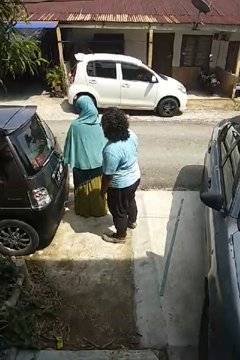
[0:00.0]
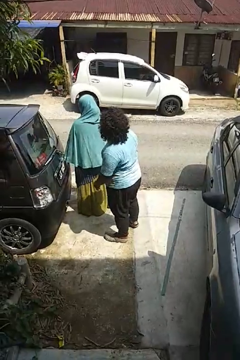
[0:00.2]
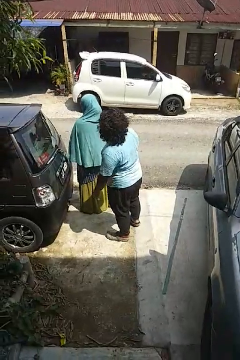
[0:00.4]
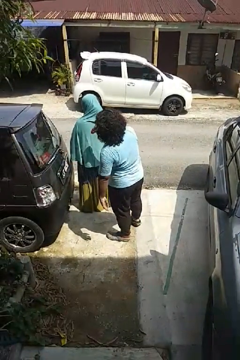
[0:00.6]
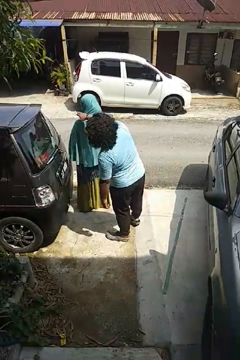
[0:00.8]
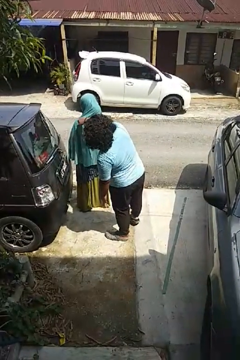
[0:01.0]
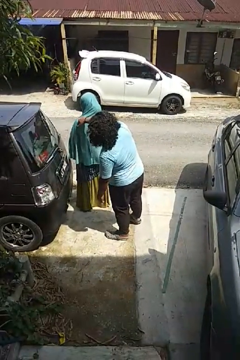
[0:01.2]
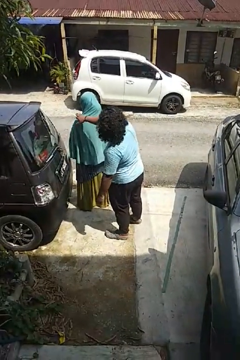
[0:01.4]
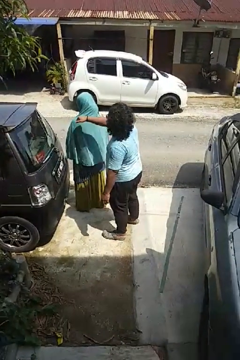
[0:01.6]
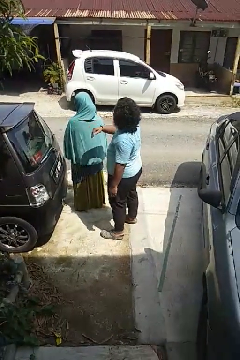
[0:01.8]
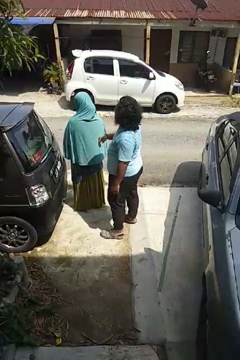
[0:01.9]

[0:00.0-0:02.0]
person touches back of person

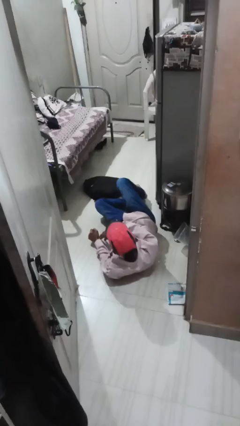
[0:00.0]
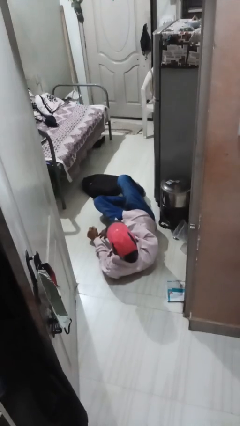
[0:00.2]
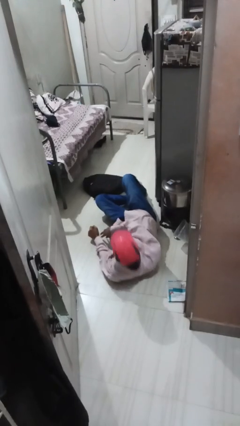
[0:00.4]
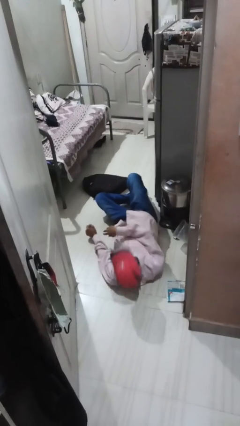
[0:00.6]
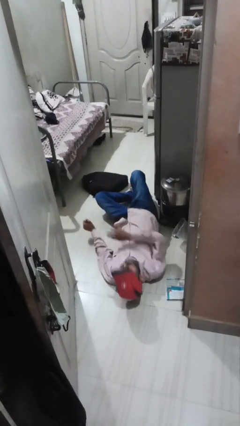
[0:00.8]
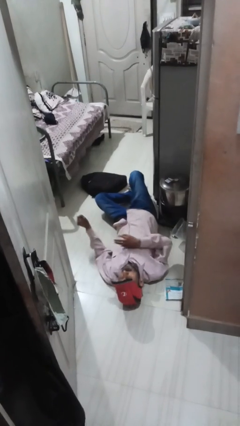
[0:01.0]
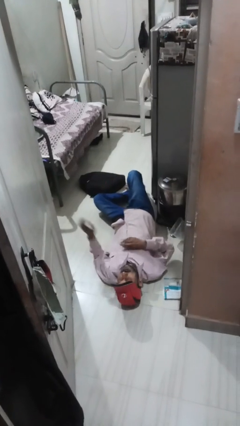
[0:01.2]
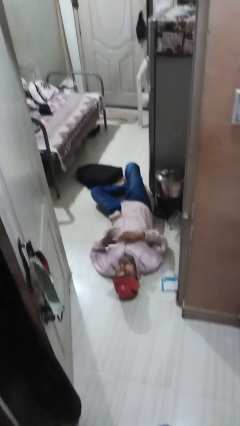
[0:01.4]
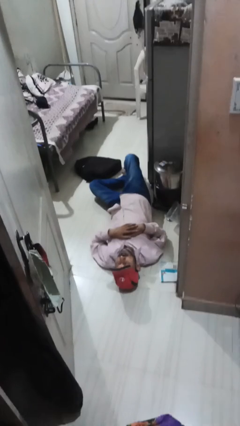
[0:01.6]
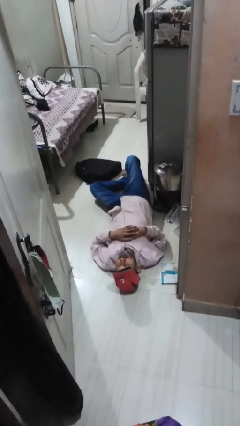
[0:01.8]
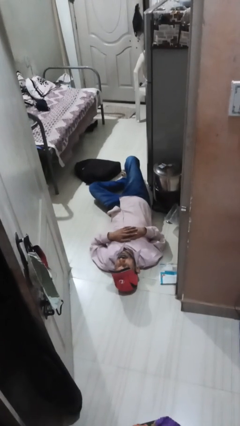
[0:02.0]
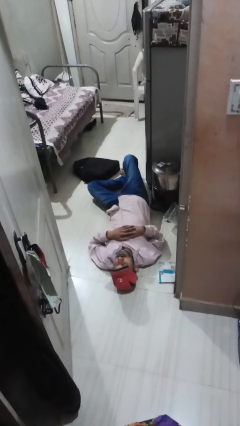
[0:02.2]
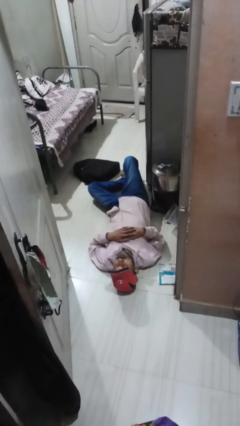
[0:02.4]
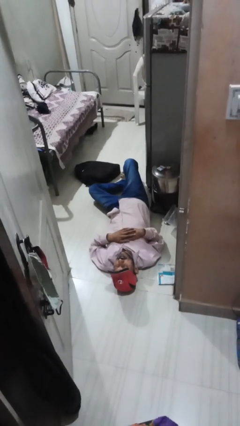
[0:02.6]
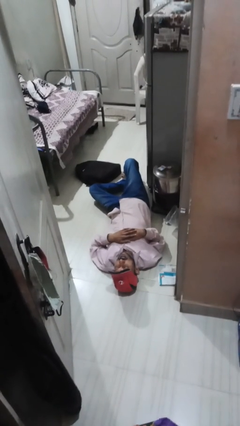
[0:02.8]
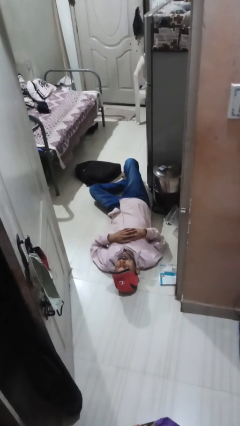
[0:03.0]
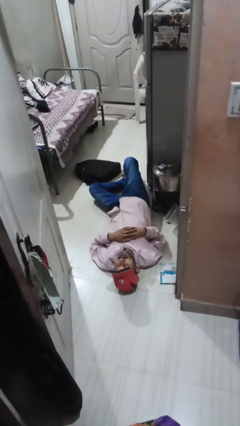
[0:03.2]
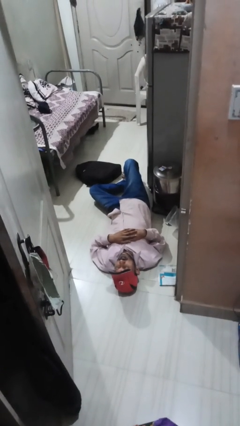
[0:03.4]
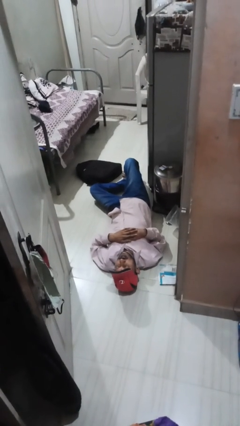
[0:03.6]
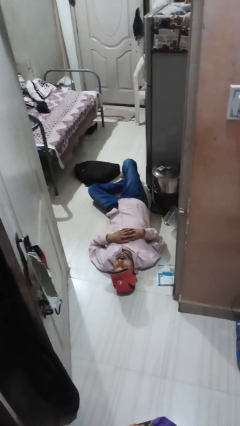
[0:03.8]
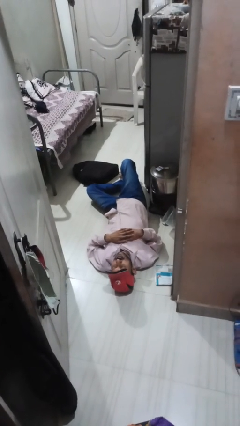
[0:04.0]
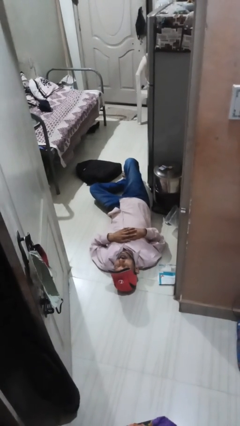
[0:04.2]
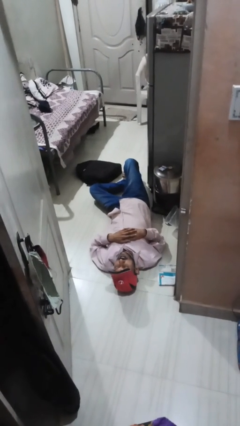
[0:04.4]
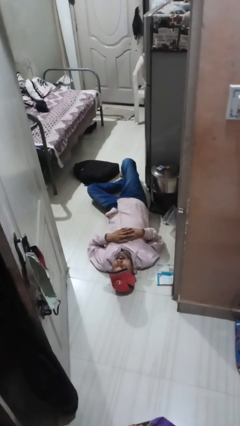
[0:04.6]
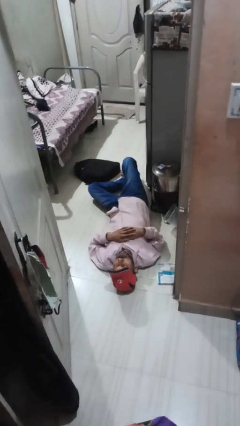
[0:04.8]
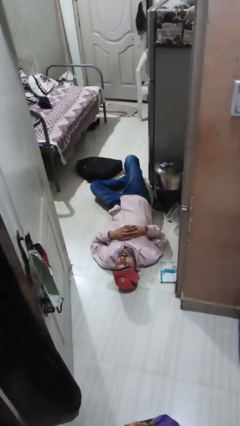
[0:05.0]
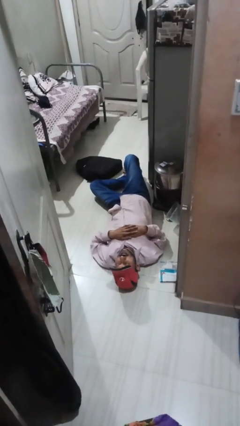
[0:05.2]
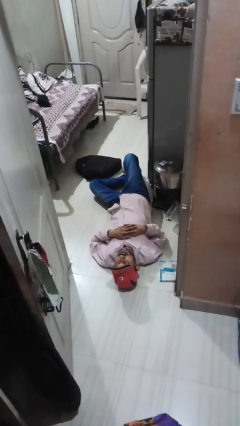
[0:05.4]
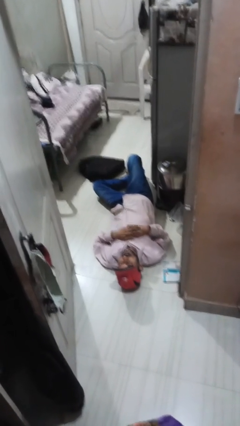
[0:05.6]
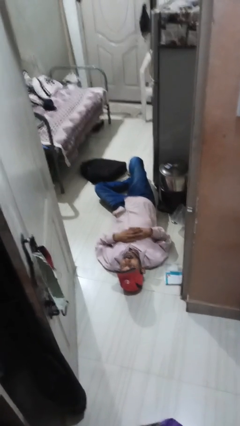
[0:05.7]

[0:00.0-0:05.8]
person lies down on floor

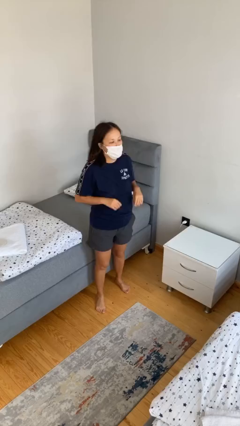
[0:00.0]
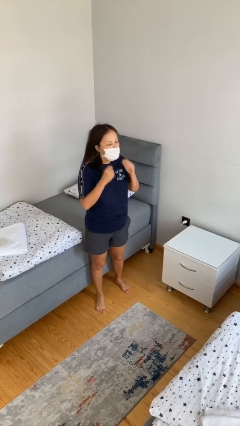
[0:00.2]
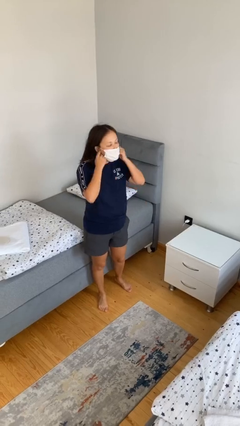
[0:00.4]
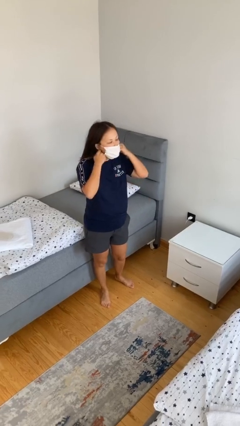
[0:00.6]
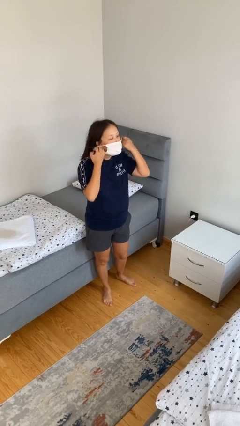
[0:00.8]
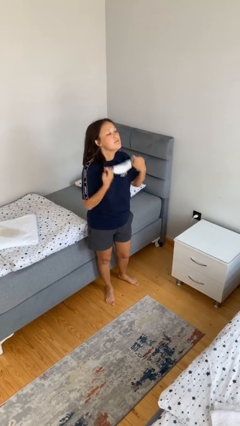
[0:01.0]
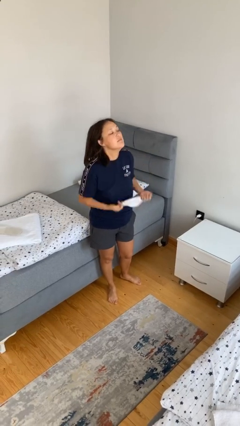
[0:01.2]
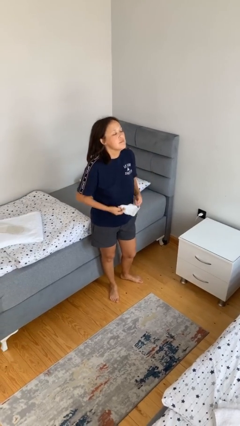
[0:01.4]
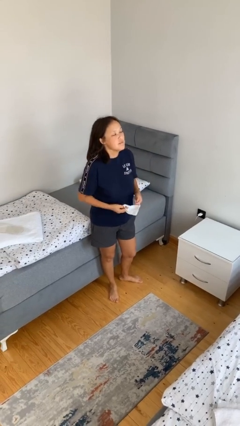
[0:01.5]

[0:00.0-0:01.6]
person takes off facemask

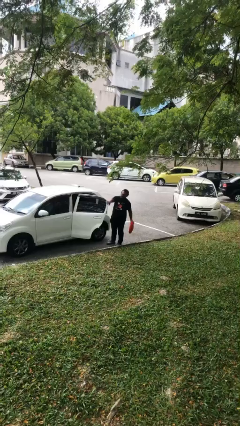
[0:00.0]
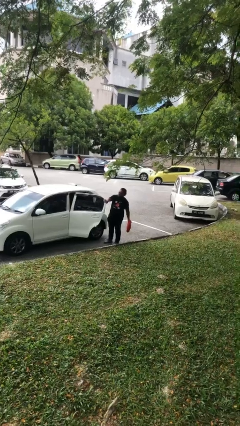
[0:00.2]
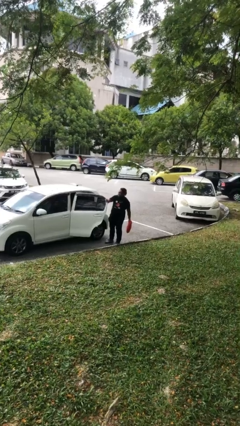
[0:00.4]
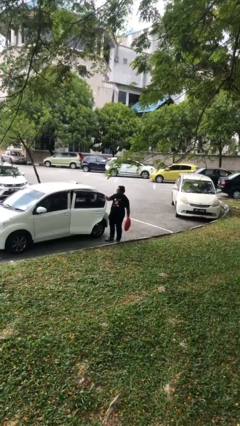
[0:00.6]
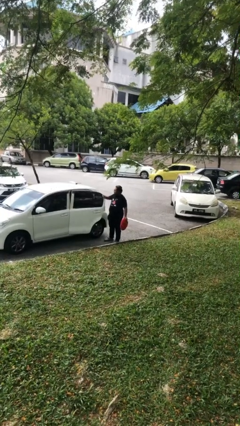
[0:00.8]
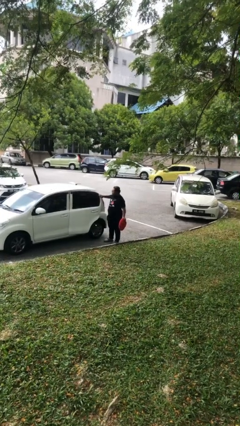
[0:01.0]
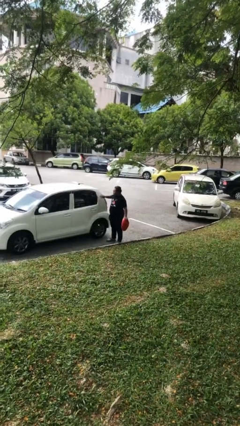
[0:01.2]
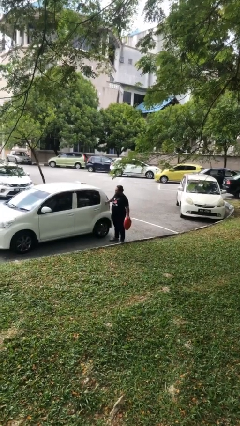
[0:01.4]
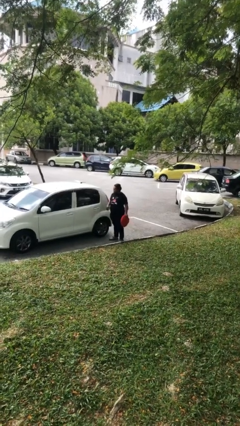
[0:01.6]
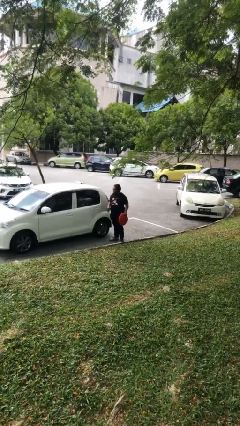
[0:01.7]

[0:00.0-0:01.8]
person closes car door

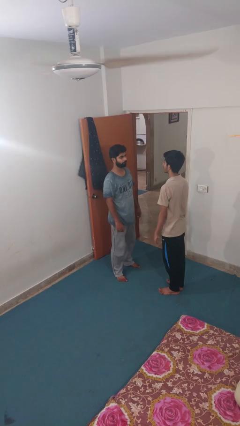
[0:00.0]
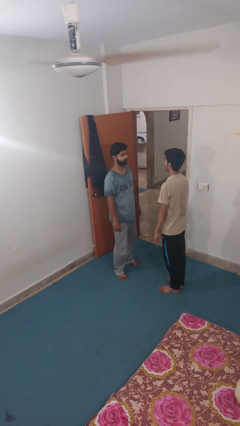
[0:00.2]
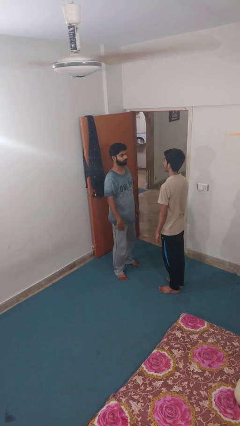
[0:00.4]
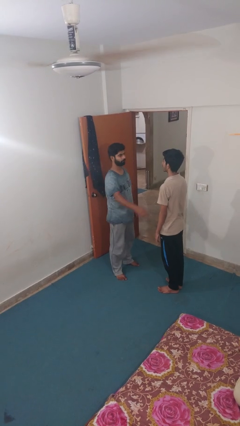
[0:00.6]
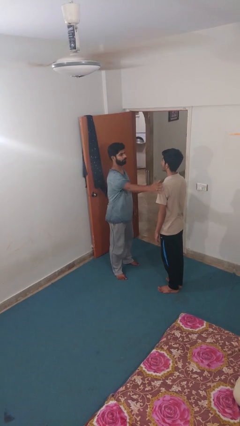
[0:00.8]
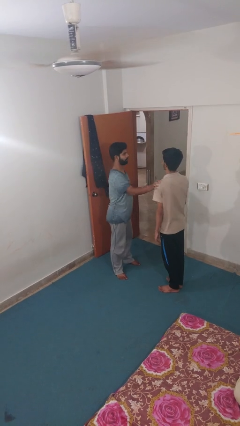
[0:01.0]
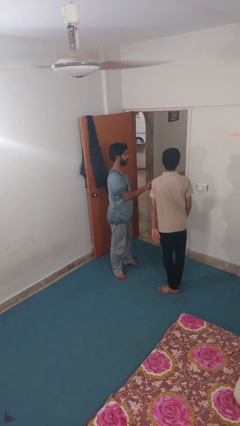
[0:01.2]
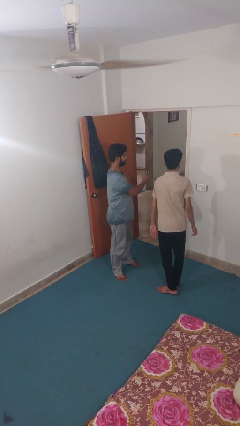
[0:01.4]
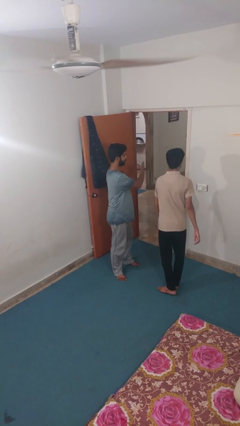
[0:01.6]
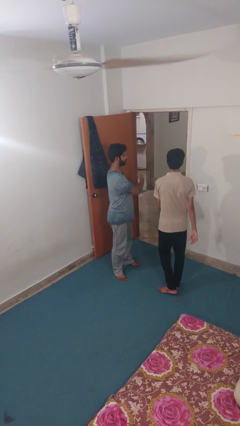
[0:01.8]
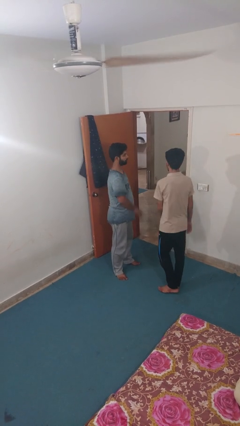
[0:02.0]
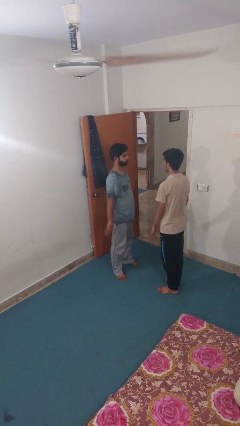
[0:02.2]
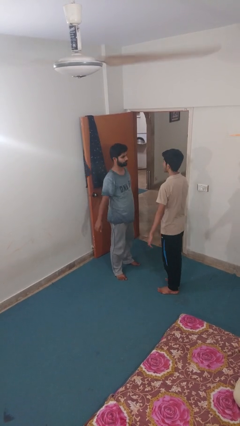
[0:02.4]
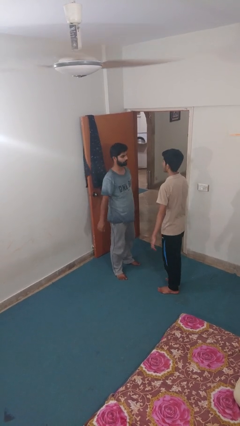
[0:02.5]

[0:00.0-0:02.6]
person shoves person

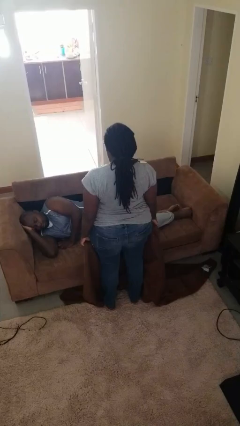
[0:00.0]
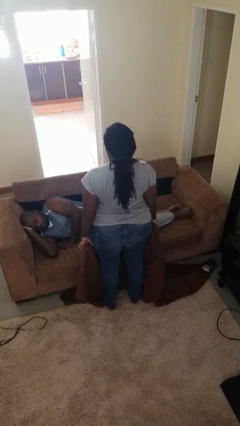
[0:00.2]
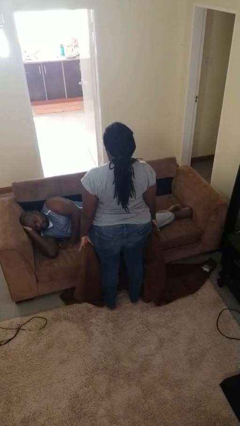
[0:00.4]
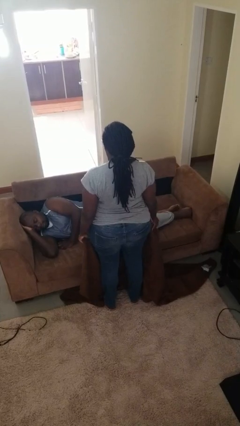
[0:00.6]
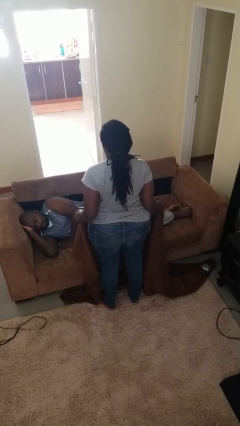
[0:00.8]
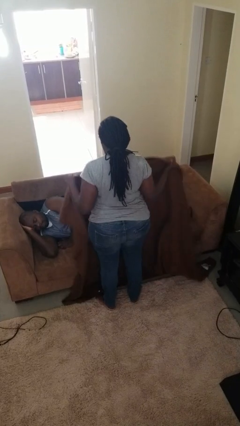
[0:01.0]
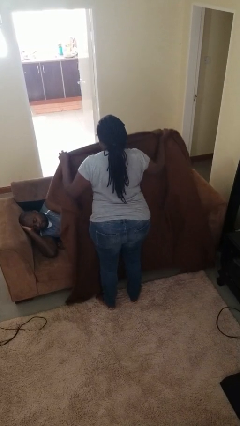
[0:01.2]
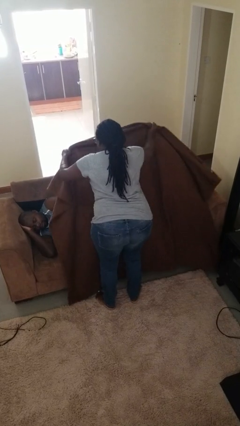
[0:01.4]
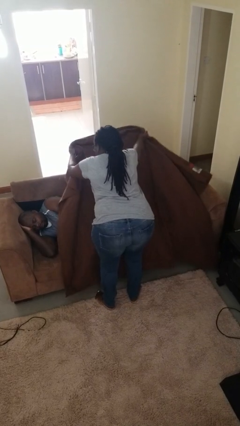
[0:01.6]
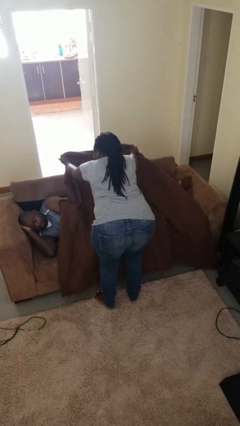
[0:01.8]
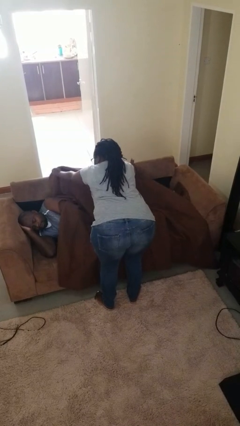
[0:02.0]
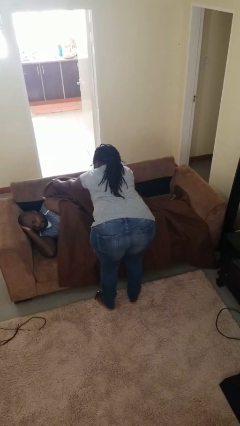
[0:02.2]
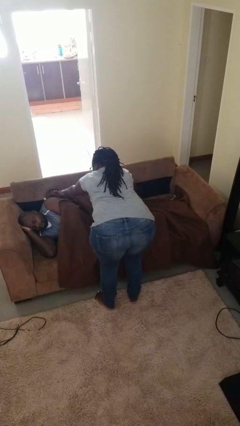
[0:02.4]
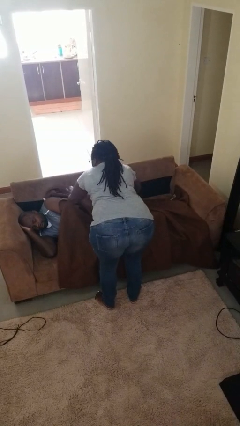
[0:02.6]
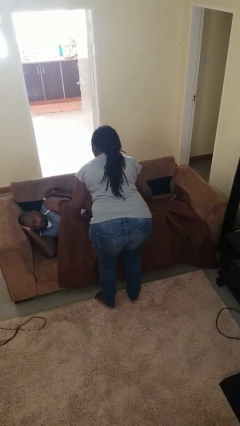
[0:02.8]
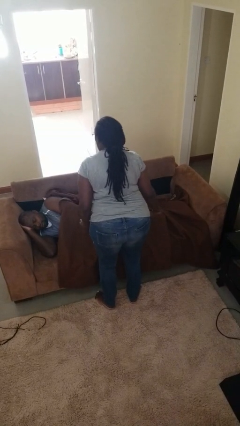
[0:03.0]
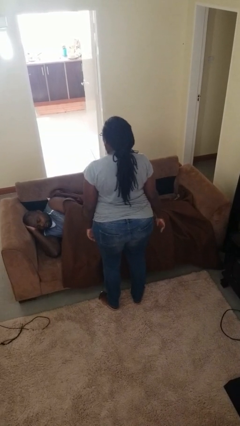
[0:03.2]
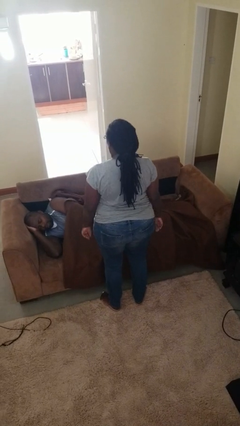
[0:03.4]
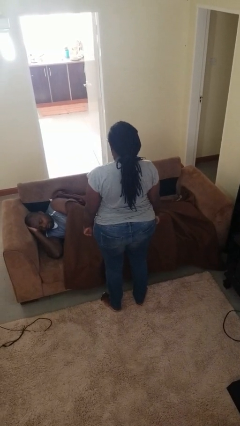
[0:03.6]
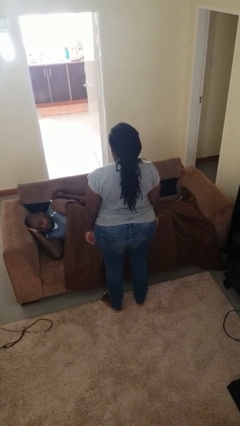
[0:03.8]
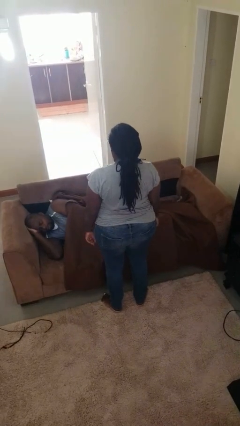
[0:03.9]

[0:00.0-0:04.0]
person covers friend with blanket

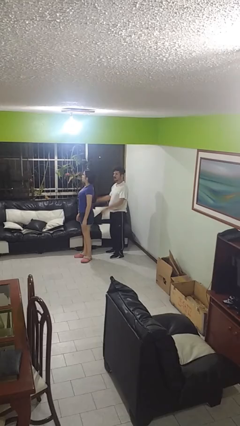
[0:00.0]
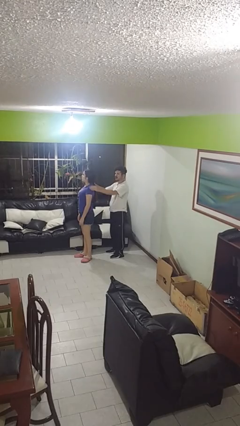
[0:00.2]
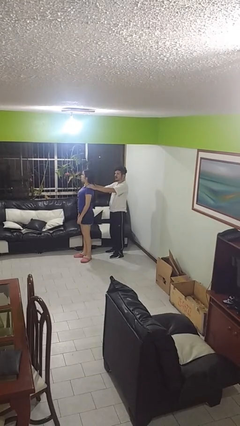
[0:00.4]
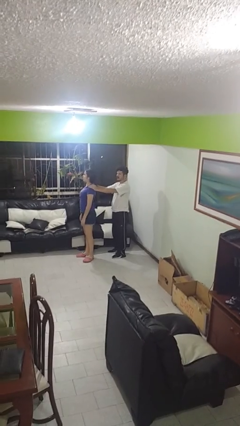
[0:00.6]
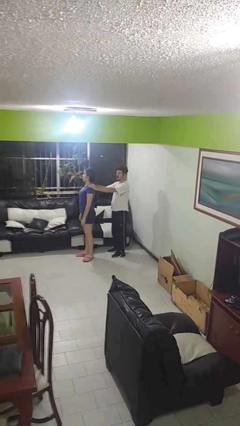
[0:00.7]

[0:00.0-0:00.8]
person grabs person by shoulder
